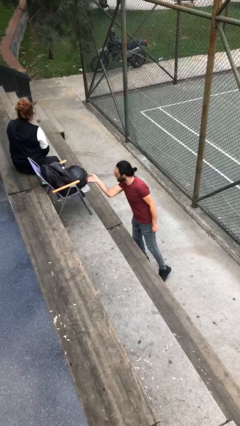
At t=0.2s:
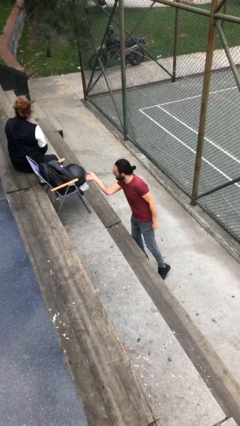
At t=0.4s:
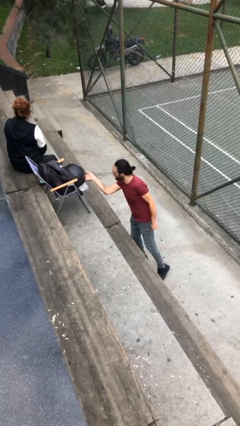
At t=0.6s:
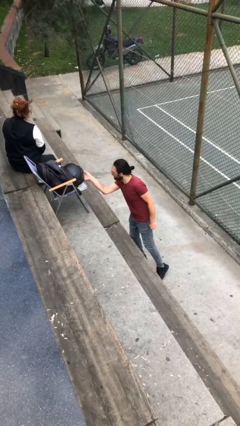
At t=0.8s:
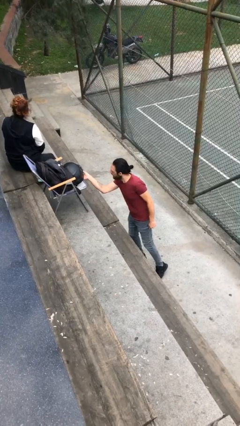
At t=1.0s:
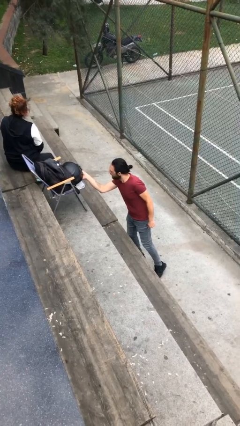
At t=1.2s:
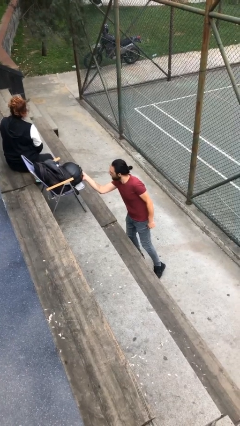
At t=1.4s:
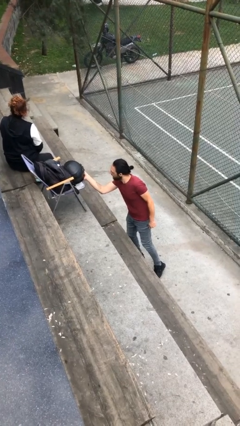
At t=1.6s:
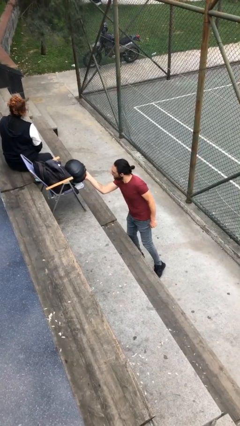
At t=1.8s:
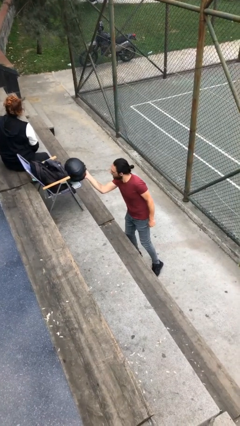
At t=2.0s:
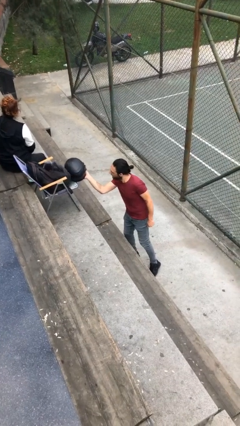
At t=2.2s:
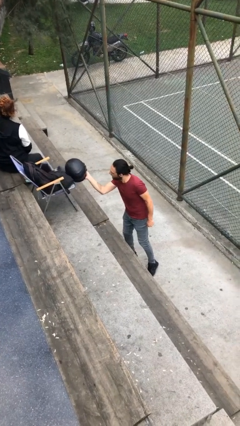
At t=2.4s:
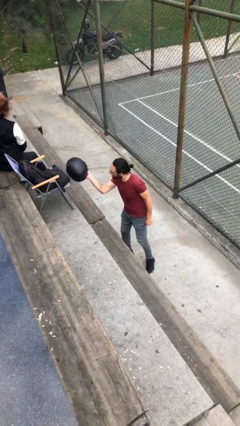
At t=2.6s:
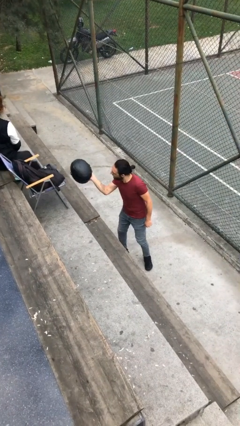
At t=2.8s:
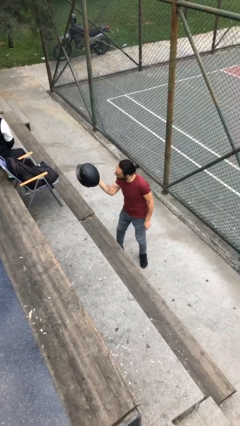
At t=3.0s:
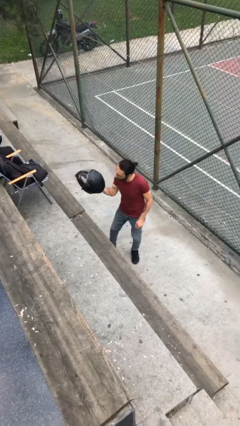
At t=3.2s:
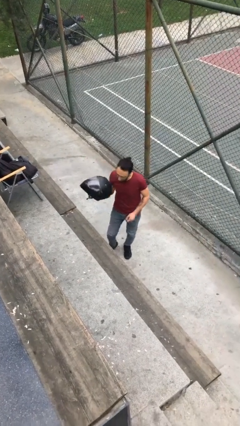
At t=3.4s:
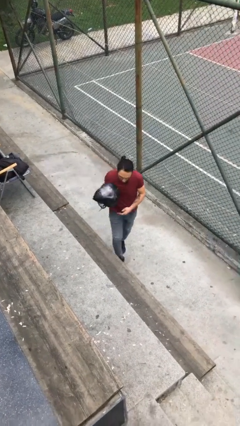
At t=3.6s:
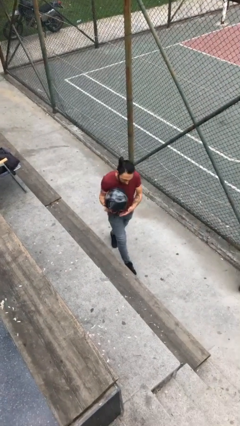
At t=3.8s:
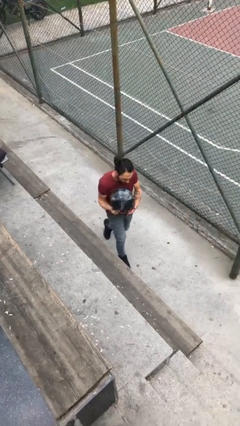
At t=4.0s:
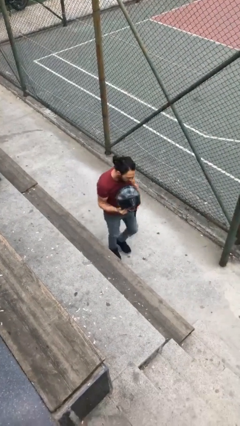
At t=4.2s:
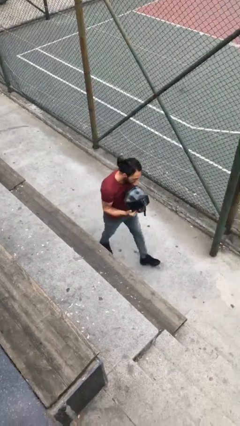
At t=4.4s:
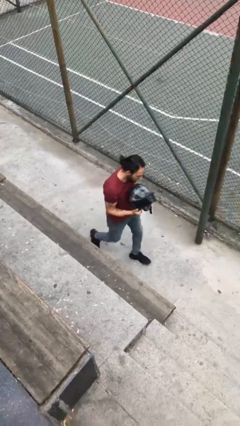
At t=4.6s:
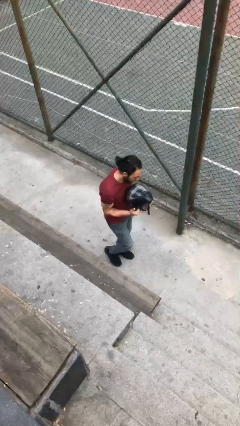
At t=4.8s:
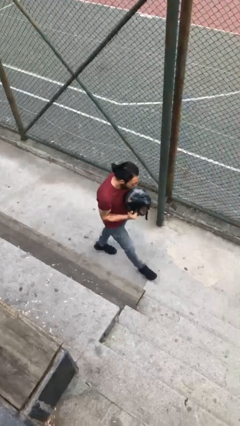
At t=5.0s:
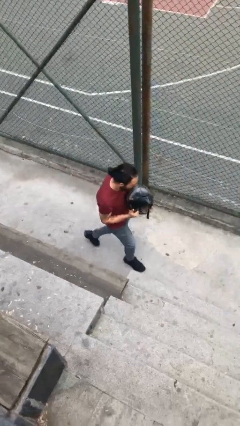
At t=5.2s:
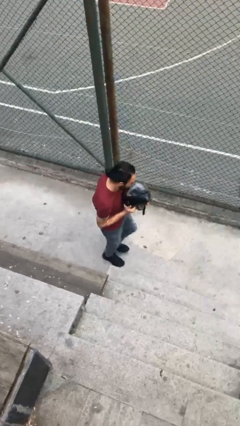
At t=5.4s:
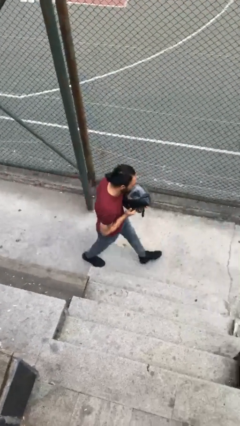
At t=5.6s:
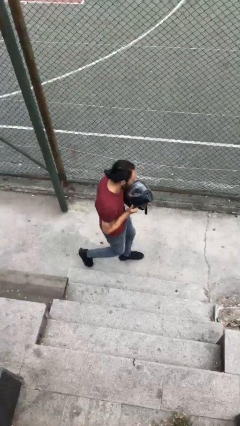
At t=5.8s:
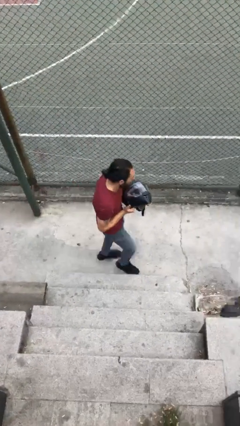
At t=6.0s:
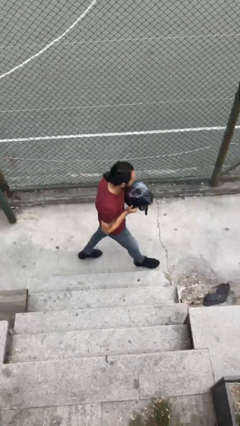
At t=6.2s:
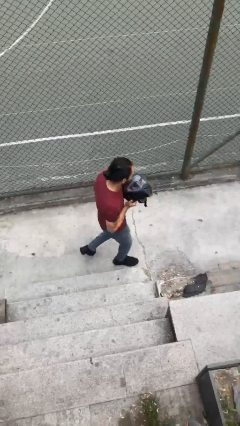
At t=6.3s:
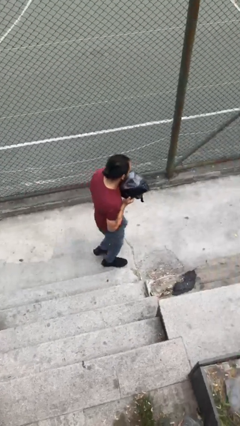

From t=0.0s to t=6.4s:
person steals object from person

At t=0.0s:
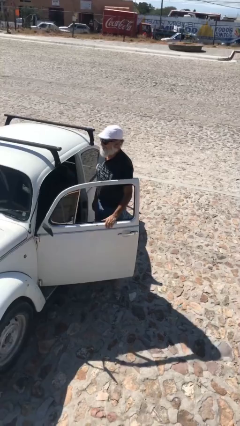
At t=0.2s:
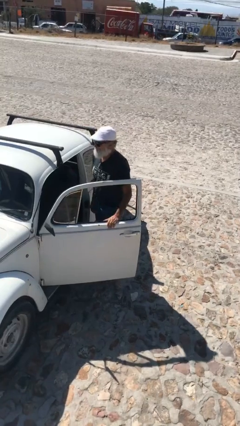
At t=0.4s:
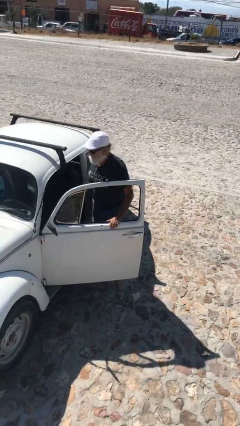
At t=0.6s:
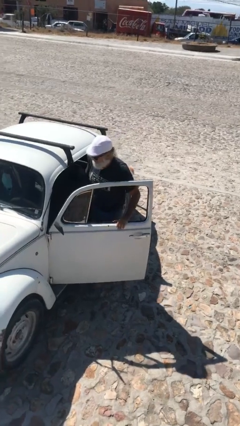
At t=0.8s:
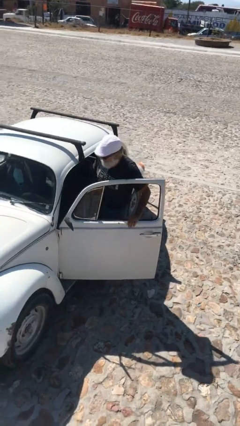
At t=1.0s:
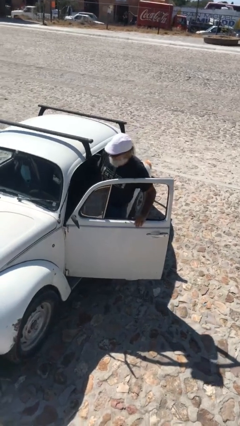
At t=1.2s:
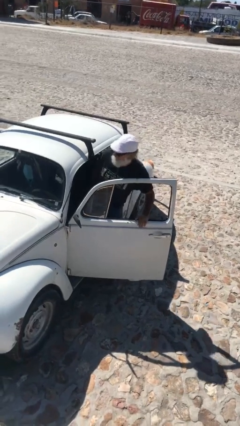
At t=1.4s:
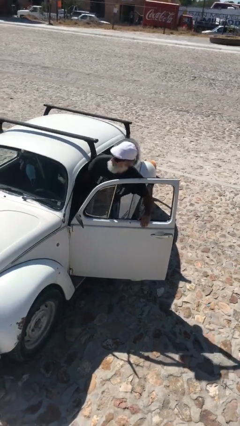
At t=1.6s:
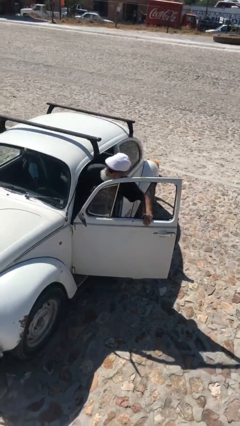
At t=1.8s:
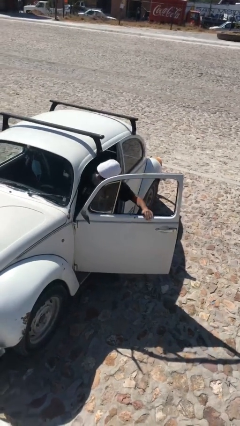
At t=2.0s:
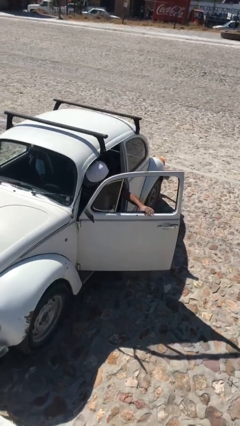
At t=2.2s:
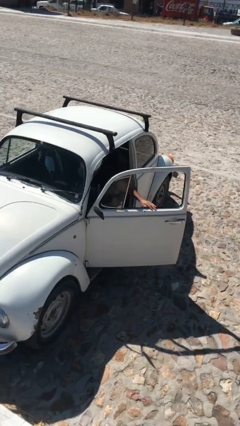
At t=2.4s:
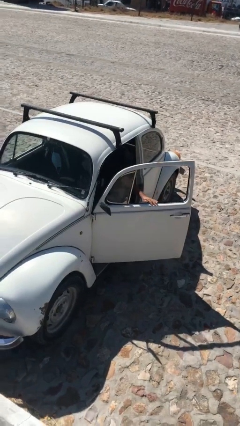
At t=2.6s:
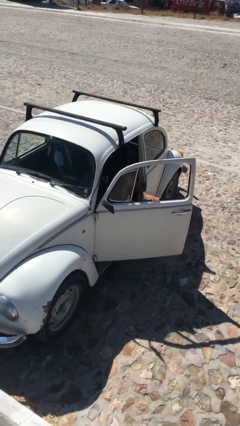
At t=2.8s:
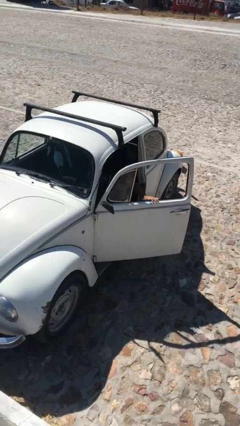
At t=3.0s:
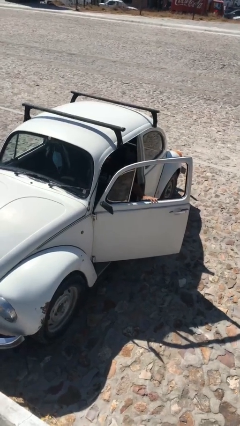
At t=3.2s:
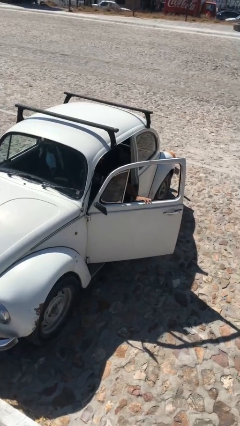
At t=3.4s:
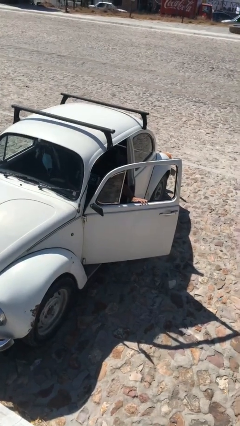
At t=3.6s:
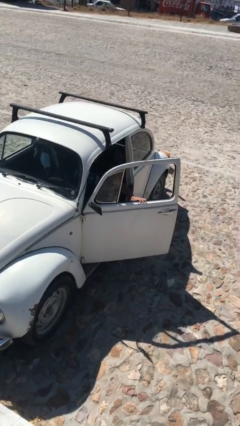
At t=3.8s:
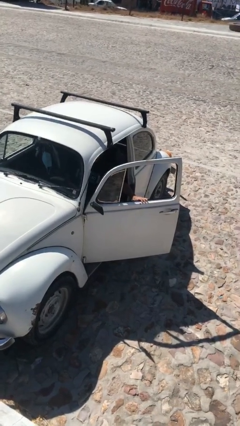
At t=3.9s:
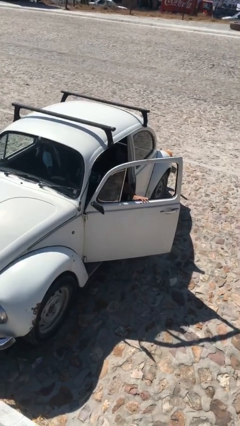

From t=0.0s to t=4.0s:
person enters car

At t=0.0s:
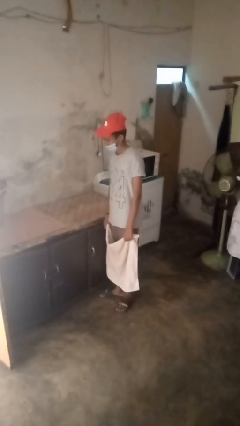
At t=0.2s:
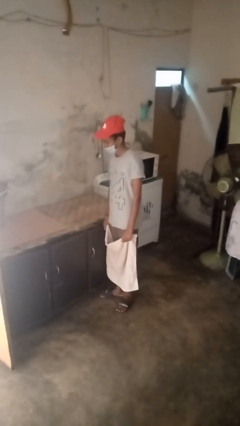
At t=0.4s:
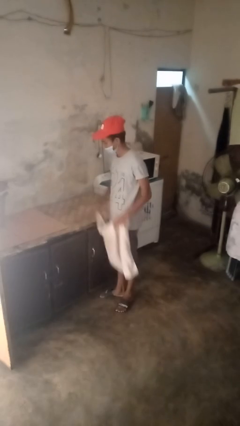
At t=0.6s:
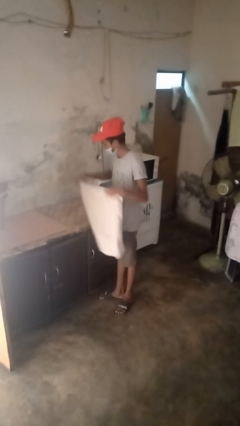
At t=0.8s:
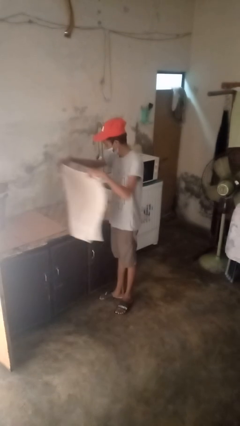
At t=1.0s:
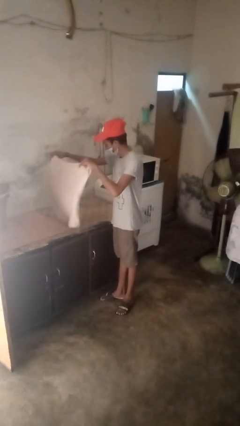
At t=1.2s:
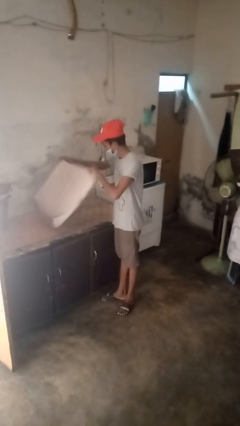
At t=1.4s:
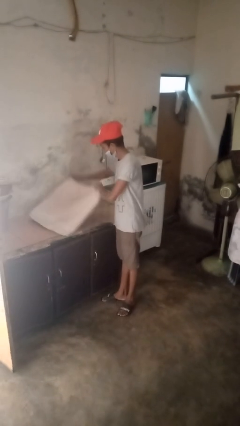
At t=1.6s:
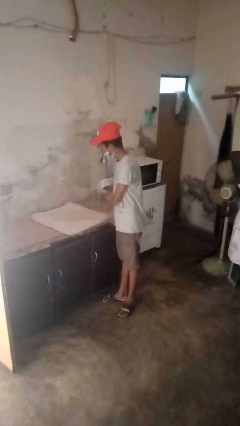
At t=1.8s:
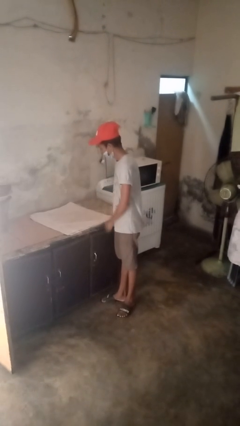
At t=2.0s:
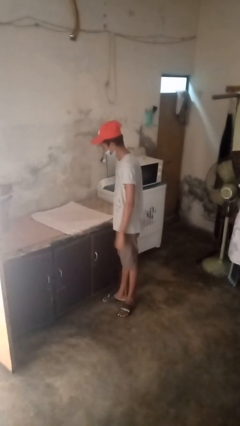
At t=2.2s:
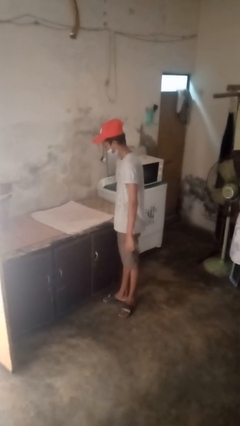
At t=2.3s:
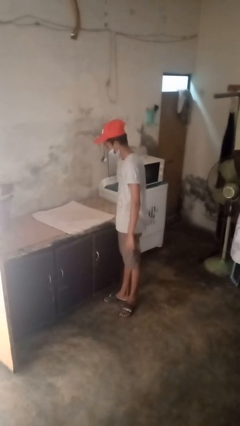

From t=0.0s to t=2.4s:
person spreads tablecloth

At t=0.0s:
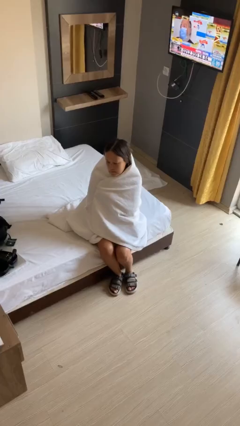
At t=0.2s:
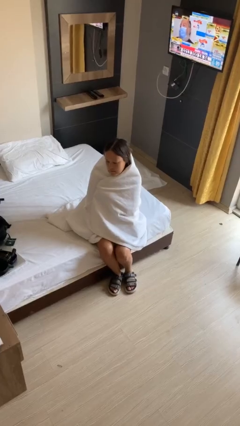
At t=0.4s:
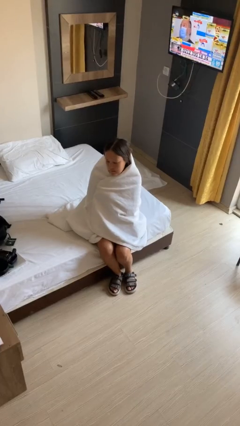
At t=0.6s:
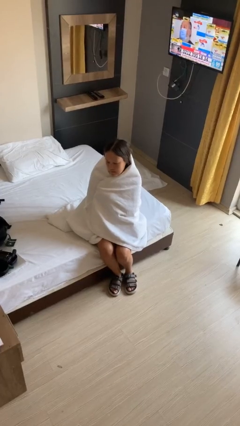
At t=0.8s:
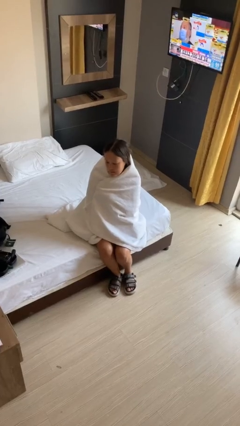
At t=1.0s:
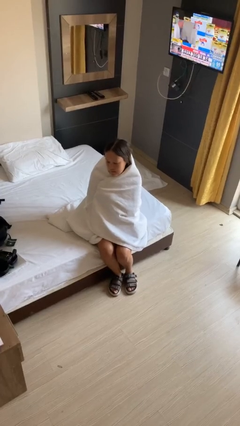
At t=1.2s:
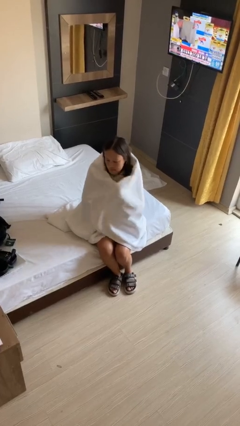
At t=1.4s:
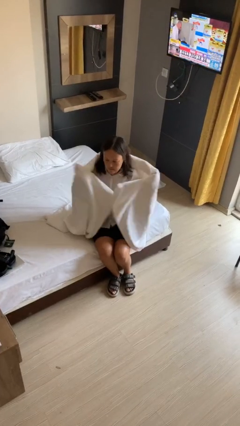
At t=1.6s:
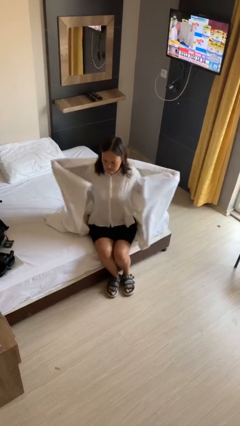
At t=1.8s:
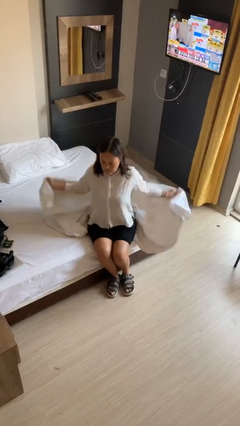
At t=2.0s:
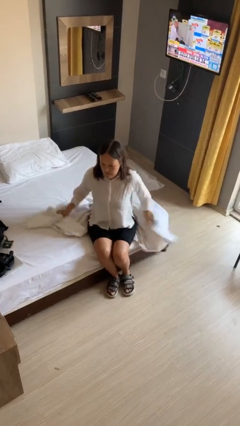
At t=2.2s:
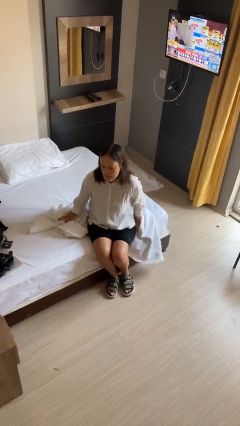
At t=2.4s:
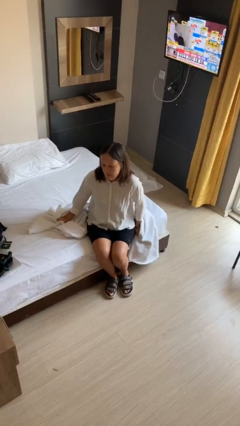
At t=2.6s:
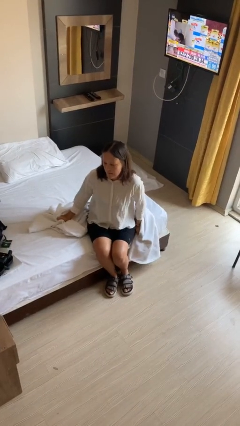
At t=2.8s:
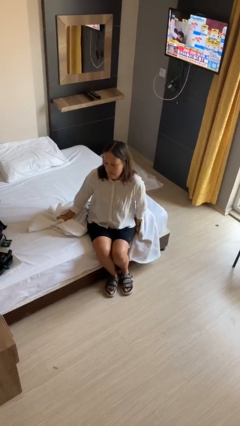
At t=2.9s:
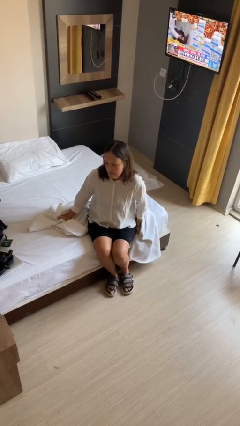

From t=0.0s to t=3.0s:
person uncovers with blanket

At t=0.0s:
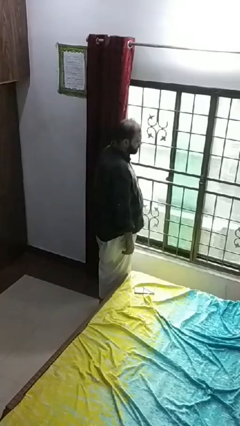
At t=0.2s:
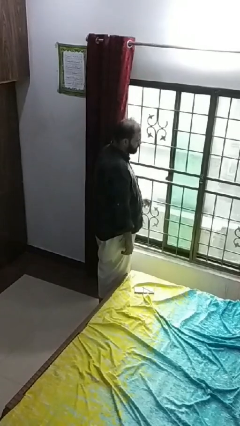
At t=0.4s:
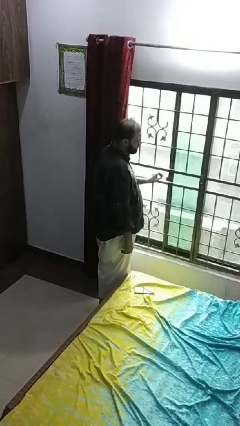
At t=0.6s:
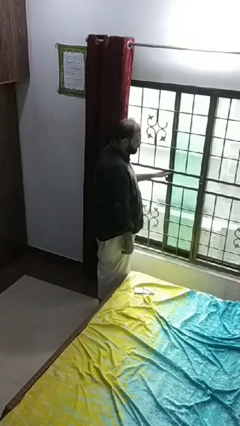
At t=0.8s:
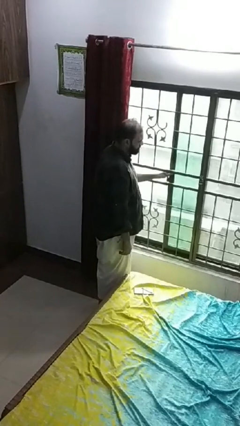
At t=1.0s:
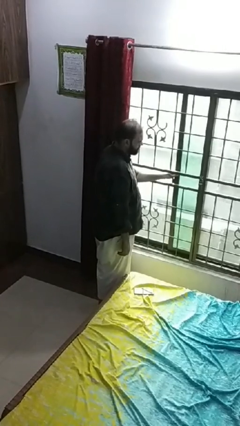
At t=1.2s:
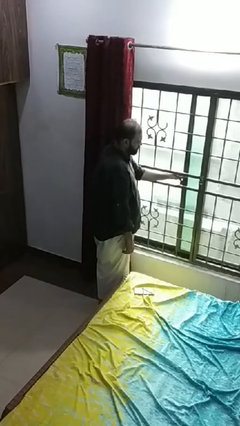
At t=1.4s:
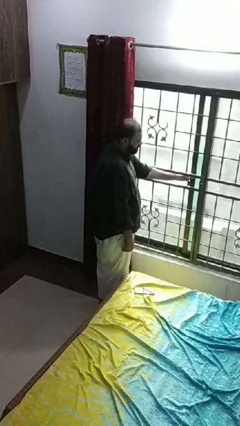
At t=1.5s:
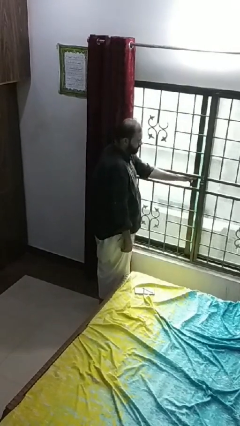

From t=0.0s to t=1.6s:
person closes home window
